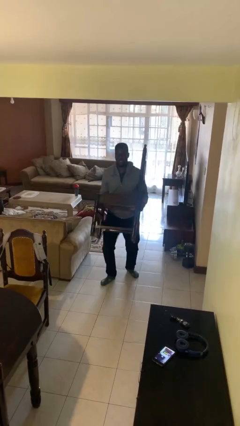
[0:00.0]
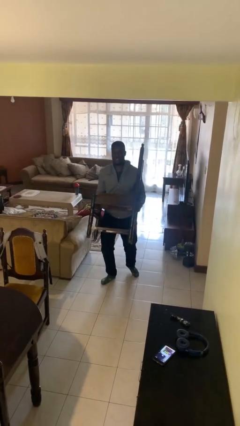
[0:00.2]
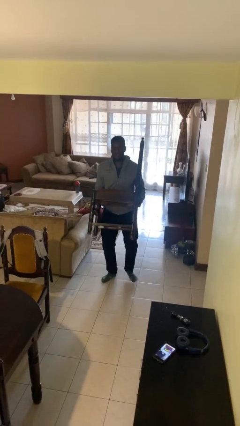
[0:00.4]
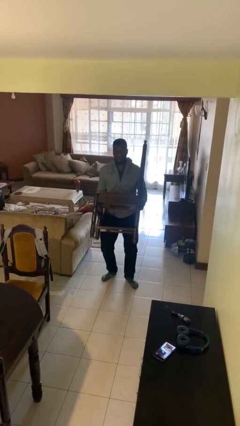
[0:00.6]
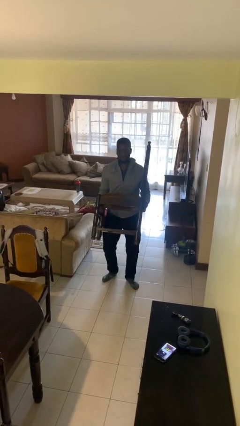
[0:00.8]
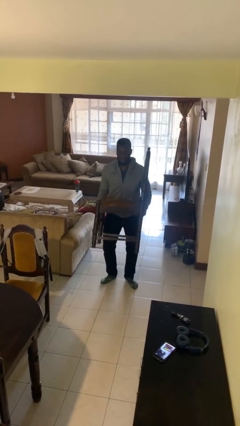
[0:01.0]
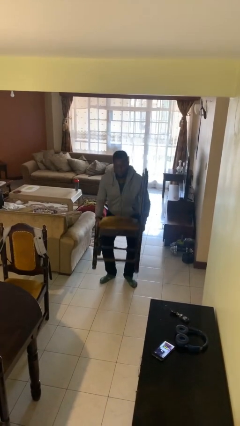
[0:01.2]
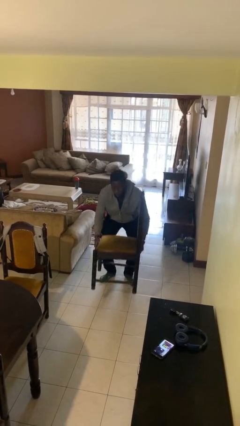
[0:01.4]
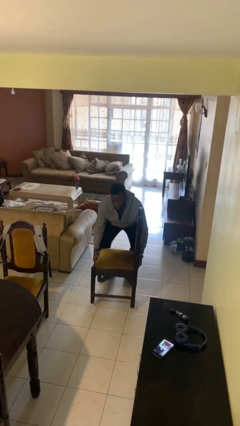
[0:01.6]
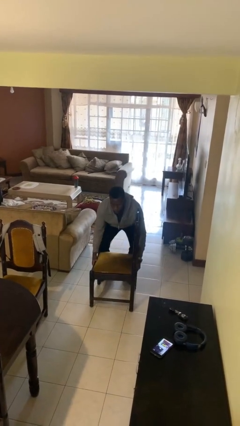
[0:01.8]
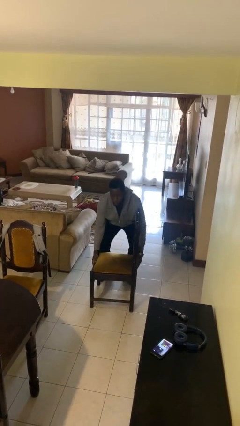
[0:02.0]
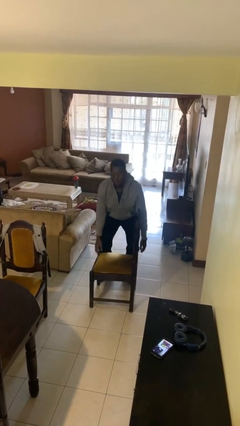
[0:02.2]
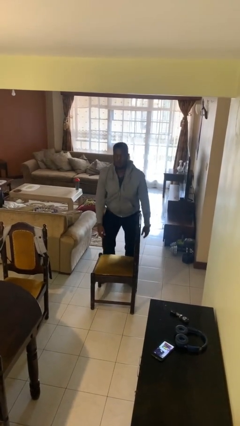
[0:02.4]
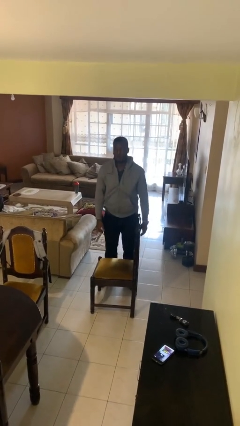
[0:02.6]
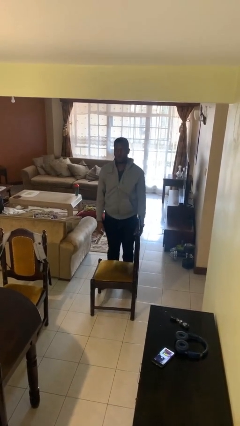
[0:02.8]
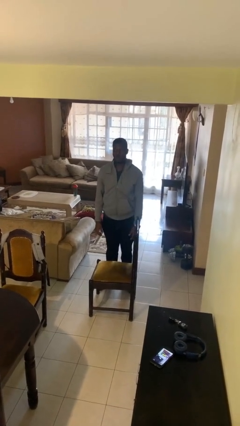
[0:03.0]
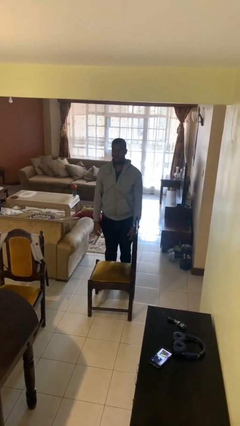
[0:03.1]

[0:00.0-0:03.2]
person puts down object on floor

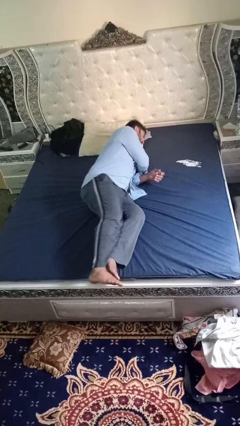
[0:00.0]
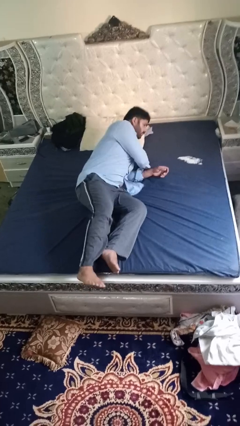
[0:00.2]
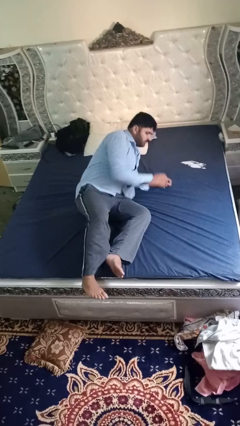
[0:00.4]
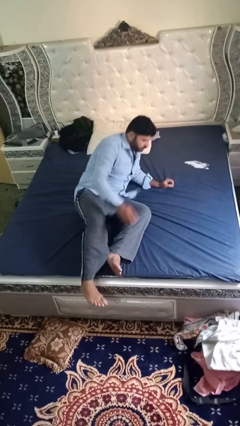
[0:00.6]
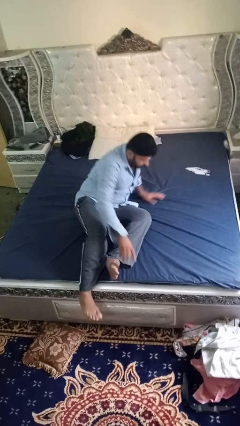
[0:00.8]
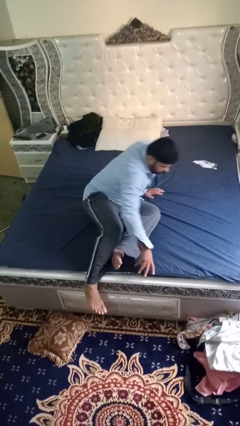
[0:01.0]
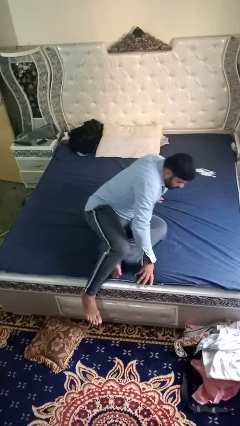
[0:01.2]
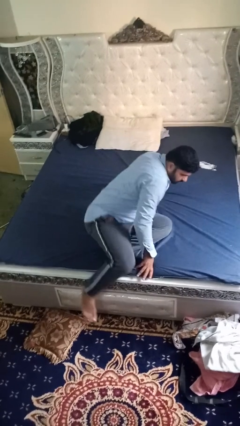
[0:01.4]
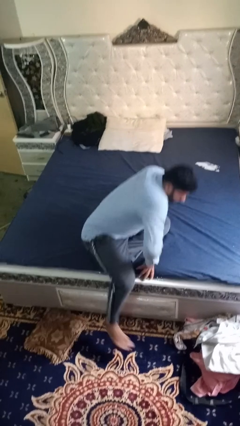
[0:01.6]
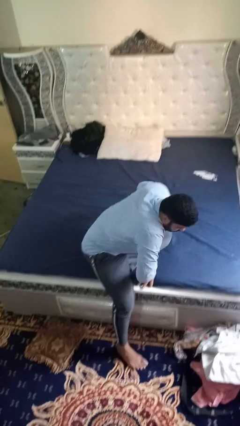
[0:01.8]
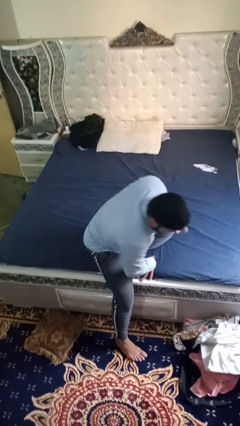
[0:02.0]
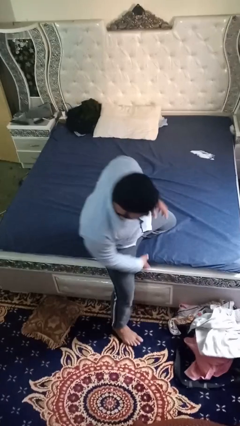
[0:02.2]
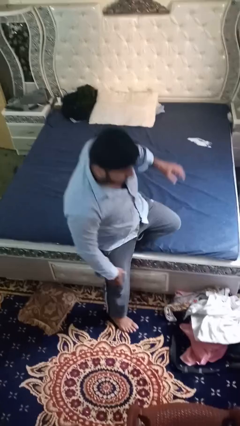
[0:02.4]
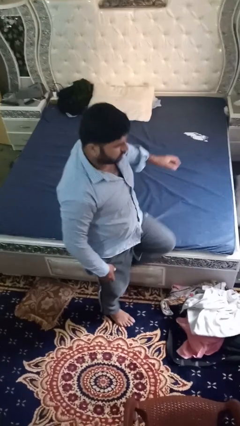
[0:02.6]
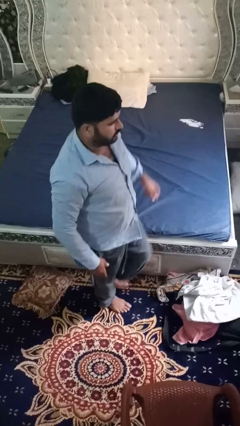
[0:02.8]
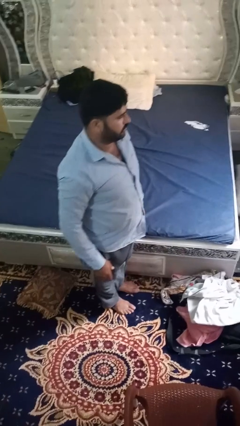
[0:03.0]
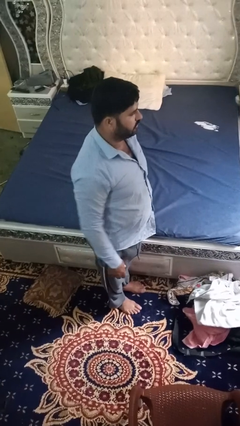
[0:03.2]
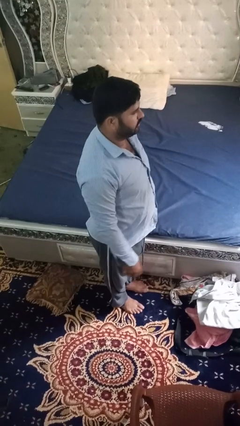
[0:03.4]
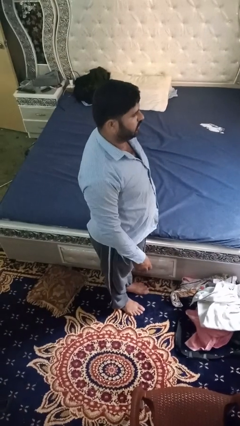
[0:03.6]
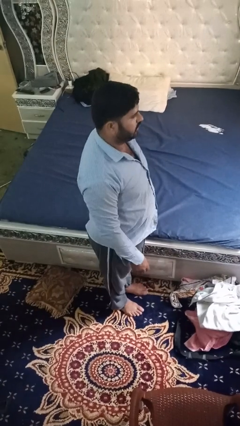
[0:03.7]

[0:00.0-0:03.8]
person stands up

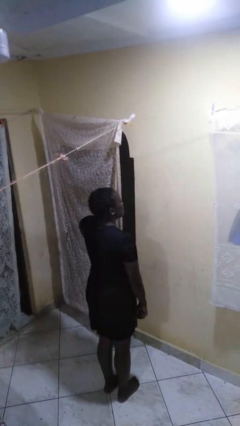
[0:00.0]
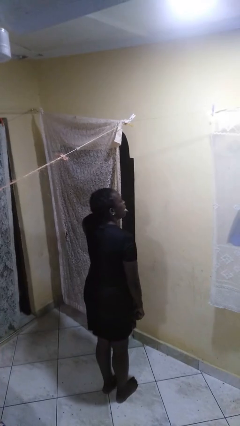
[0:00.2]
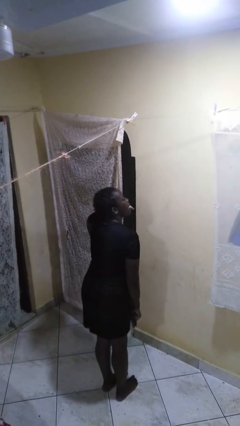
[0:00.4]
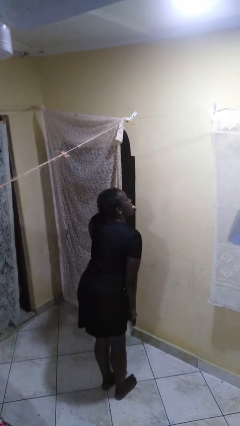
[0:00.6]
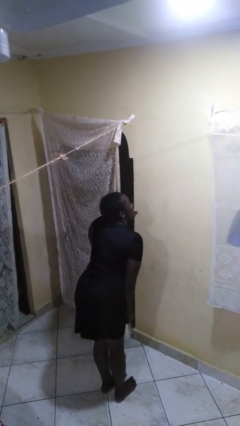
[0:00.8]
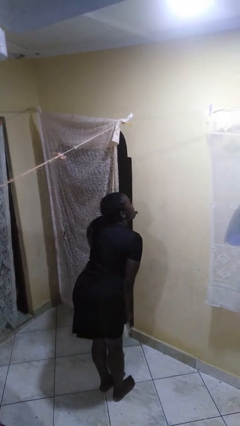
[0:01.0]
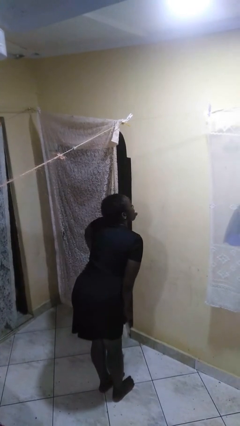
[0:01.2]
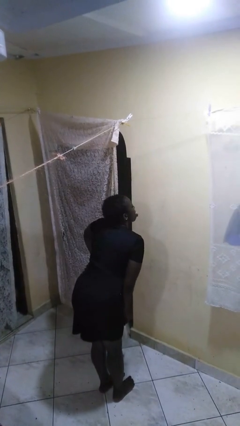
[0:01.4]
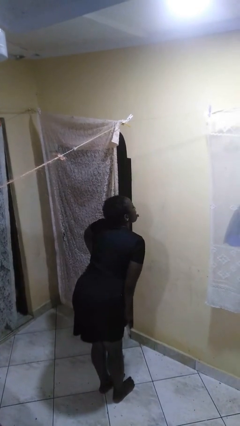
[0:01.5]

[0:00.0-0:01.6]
person sticks out tongue

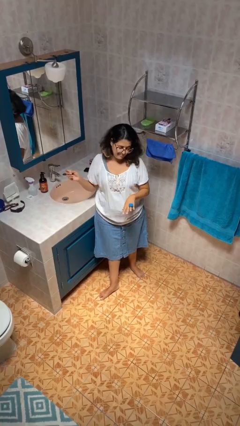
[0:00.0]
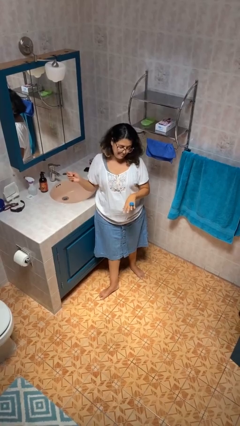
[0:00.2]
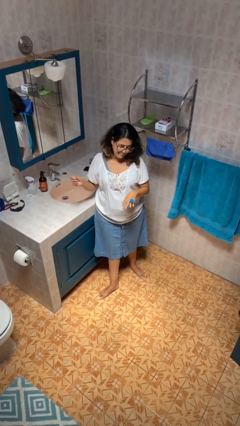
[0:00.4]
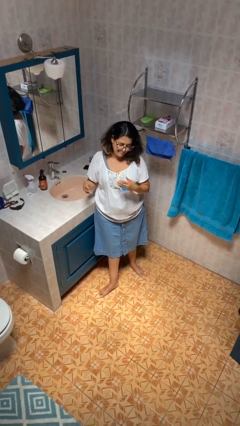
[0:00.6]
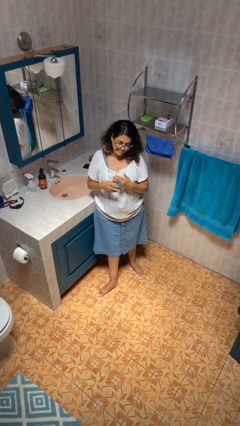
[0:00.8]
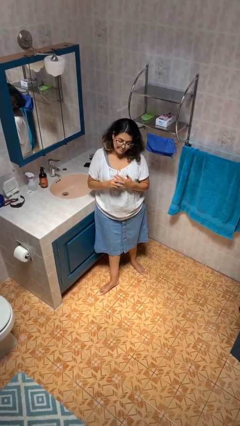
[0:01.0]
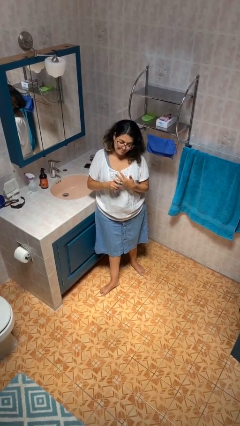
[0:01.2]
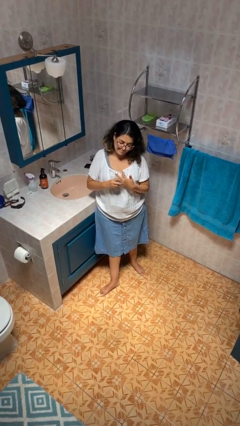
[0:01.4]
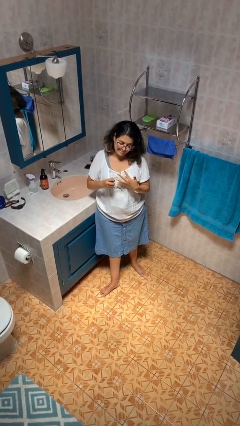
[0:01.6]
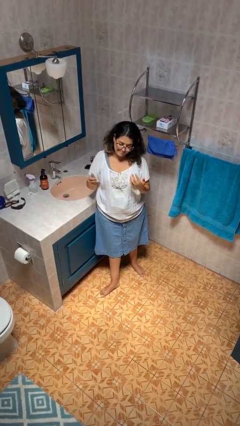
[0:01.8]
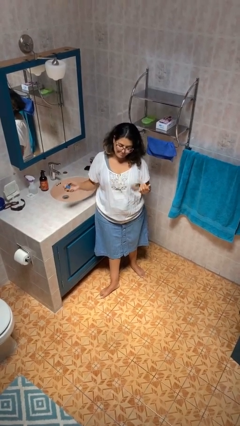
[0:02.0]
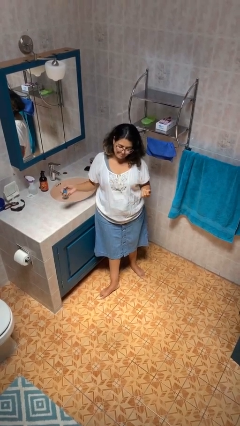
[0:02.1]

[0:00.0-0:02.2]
person takes off ring

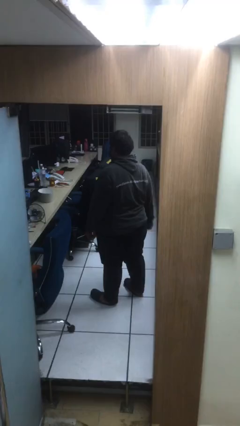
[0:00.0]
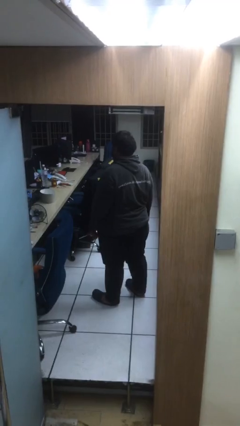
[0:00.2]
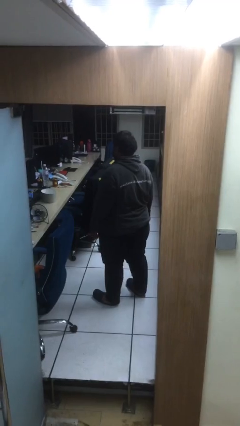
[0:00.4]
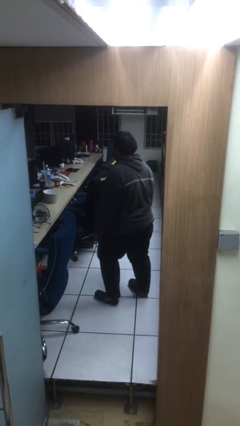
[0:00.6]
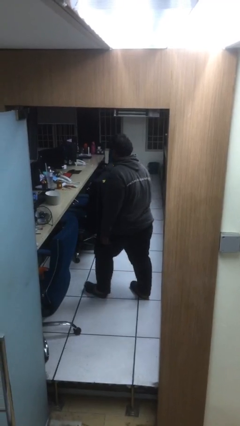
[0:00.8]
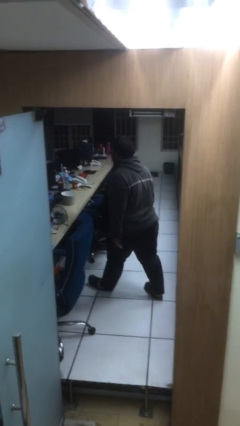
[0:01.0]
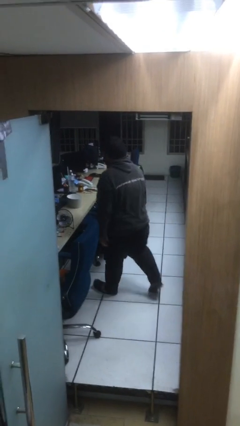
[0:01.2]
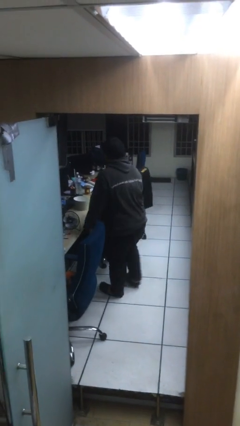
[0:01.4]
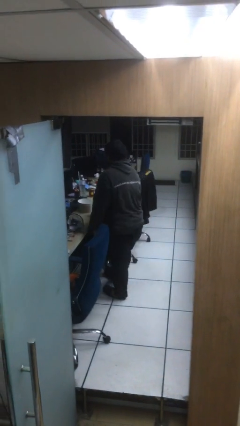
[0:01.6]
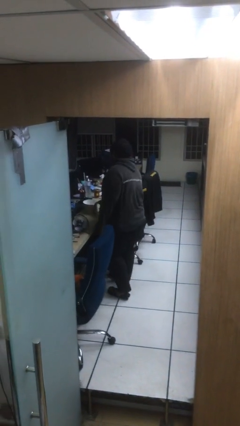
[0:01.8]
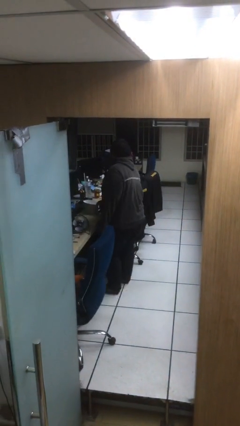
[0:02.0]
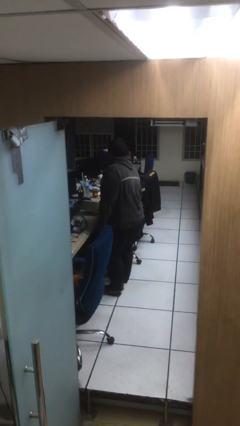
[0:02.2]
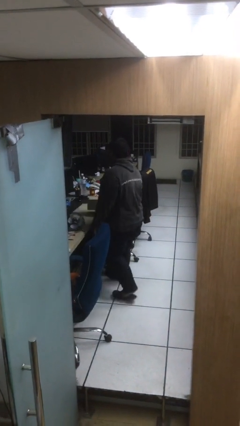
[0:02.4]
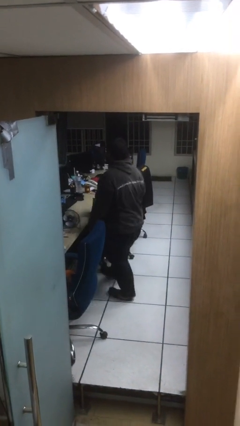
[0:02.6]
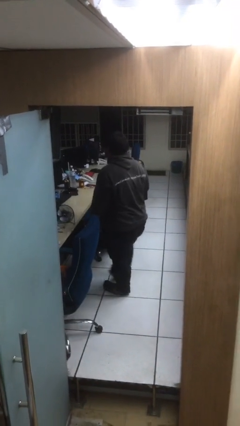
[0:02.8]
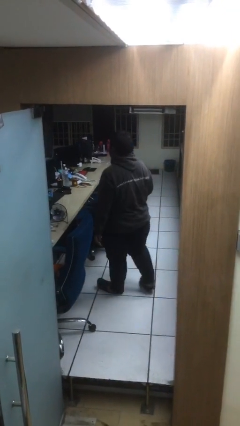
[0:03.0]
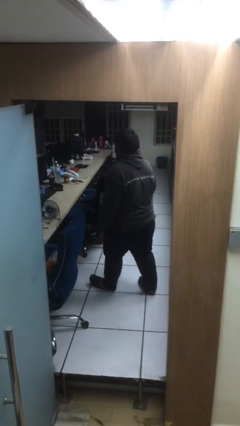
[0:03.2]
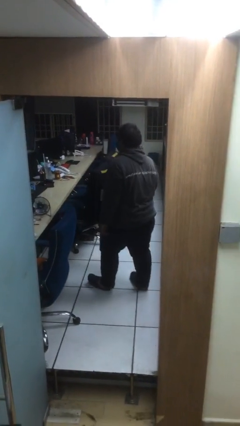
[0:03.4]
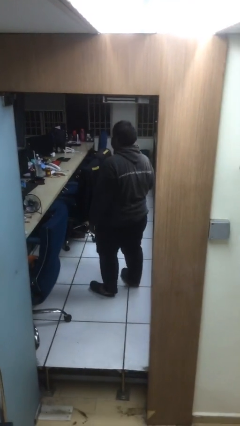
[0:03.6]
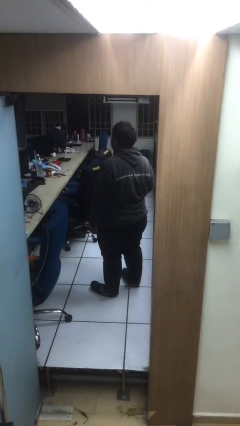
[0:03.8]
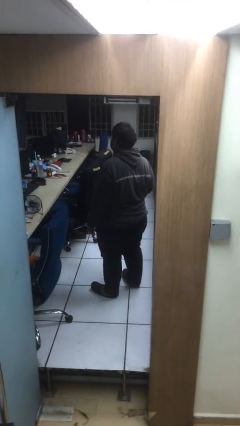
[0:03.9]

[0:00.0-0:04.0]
person picks up object from table

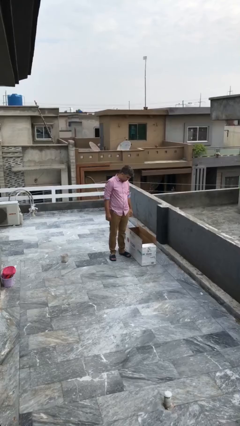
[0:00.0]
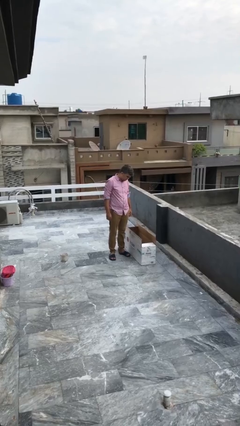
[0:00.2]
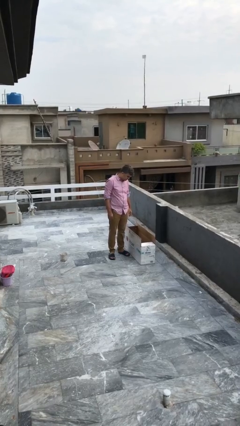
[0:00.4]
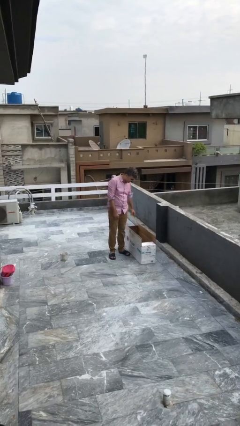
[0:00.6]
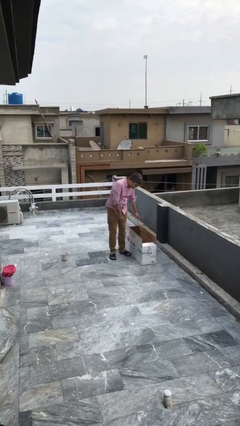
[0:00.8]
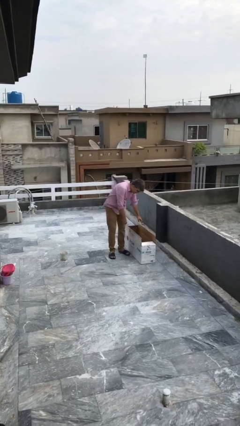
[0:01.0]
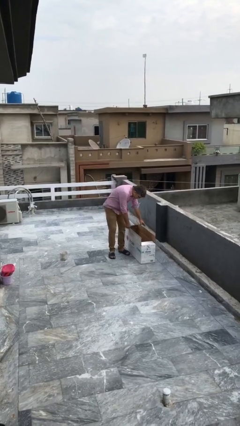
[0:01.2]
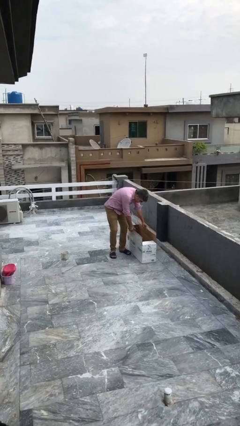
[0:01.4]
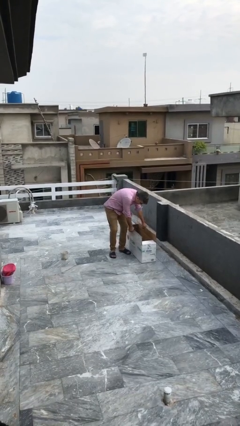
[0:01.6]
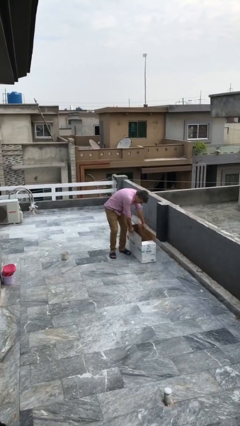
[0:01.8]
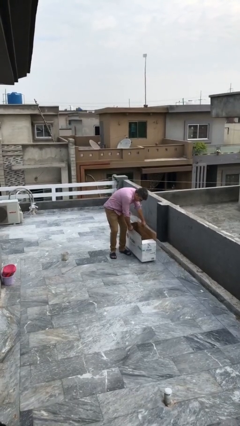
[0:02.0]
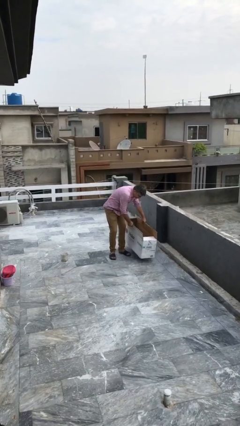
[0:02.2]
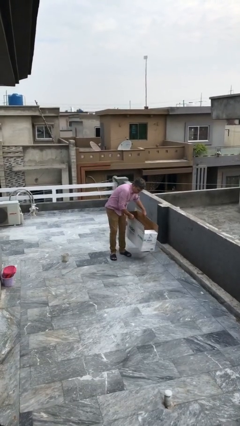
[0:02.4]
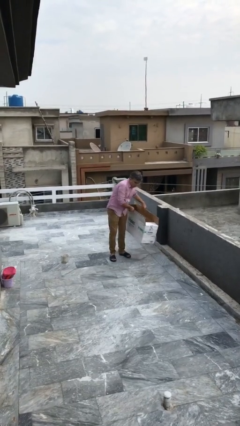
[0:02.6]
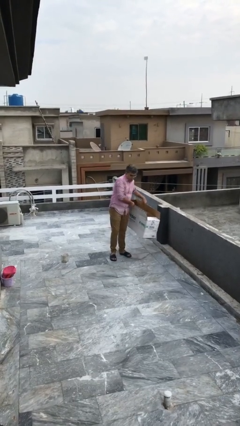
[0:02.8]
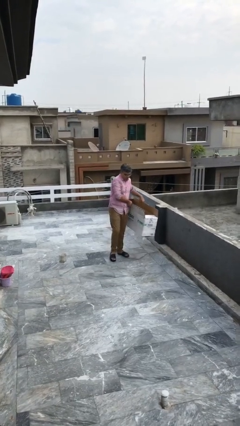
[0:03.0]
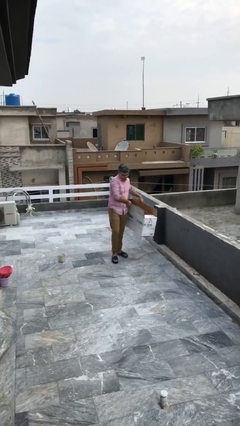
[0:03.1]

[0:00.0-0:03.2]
person picks up object from floor
